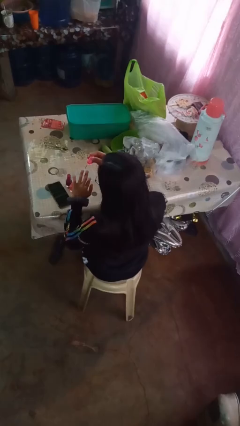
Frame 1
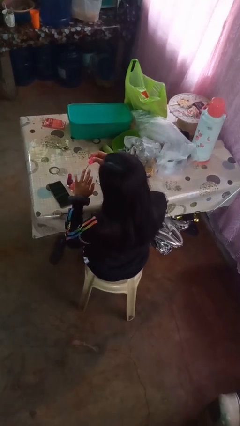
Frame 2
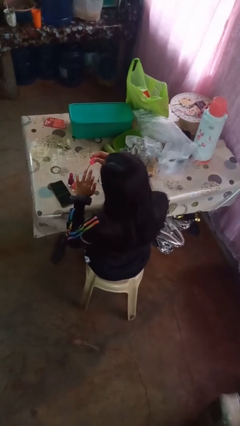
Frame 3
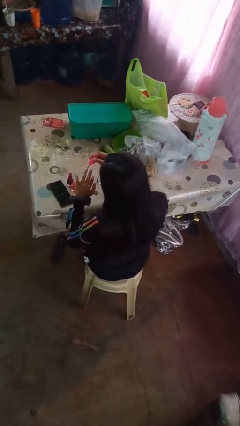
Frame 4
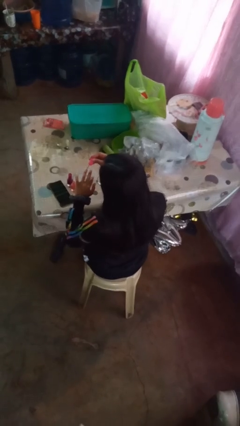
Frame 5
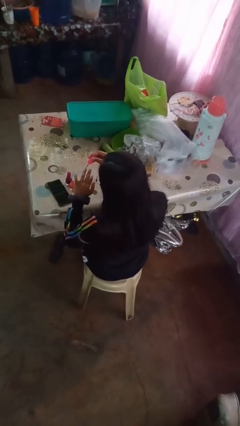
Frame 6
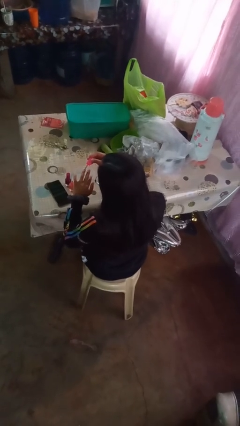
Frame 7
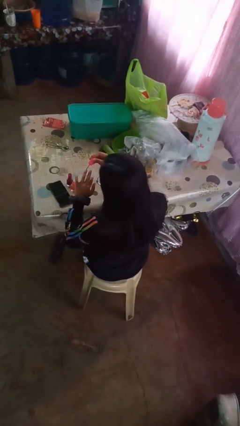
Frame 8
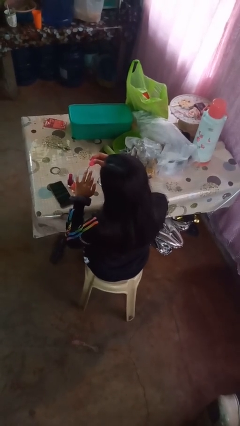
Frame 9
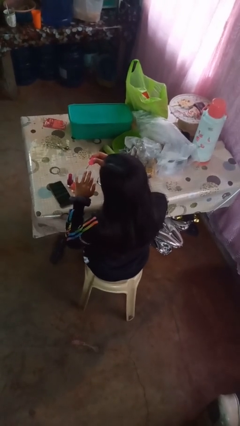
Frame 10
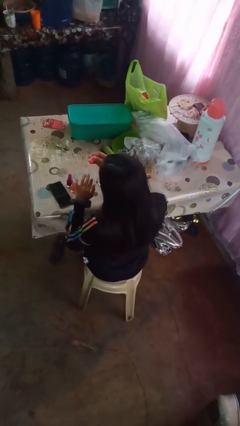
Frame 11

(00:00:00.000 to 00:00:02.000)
person paints fingernails

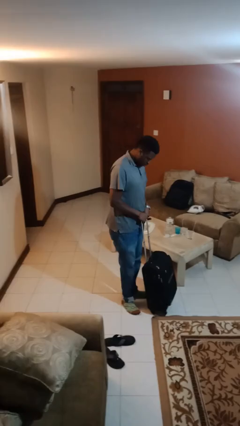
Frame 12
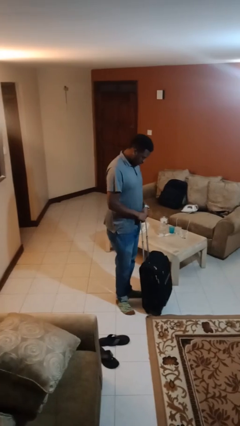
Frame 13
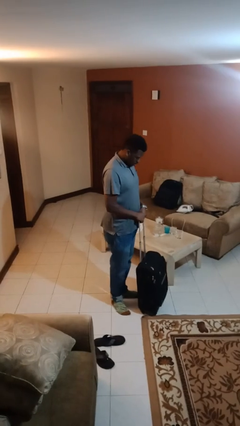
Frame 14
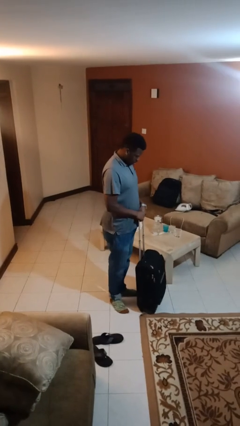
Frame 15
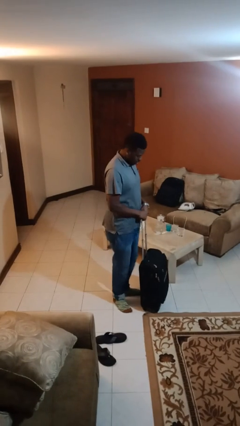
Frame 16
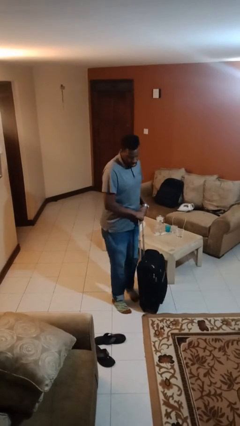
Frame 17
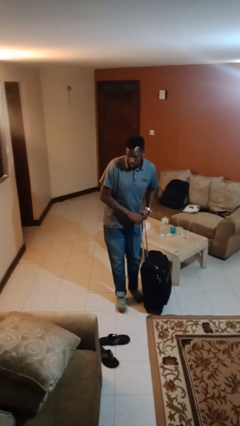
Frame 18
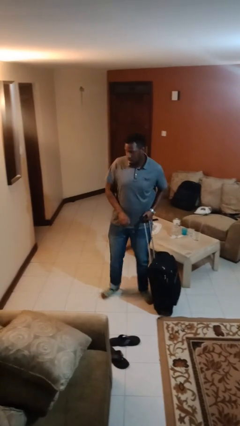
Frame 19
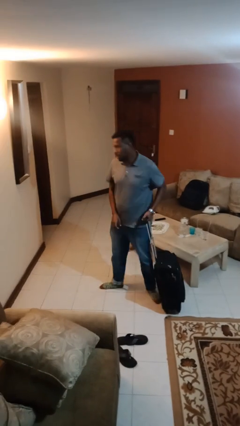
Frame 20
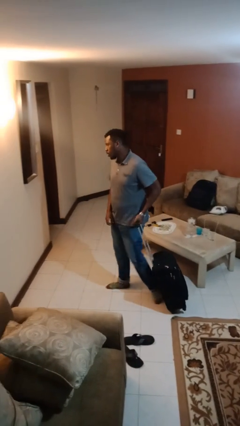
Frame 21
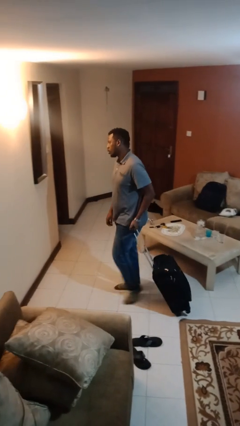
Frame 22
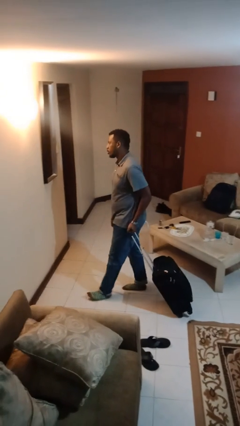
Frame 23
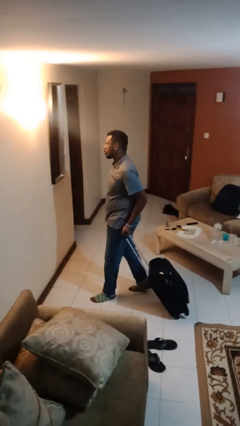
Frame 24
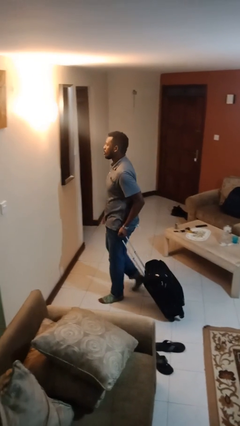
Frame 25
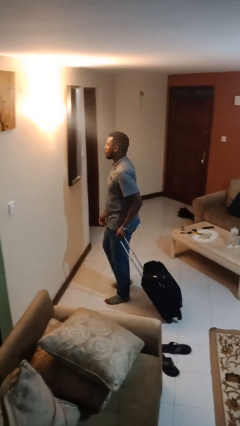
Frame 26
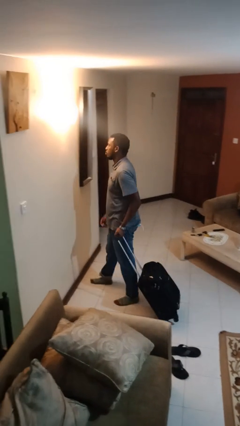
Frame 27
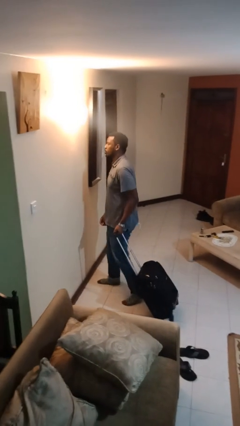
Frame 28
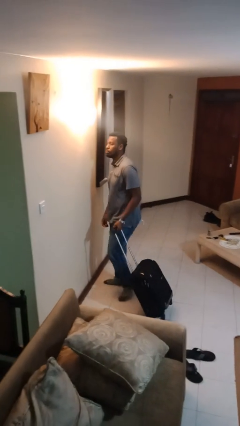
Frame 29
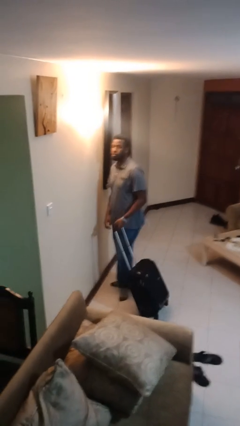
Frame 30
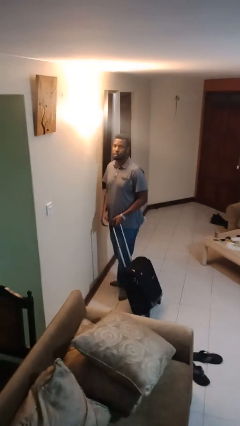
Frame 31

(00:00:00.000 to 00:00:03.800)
person pulls wheeled cart

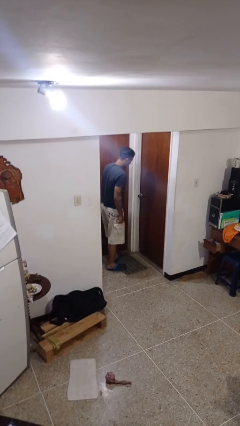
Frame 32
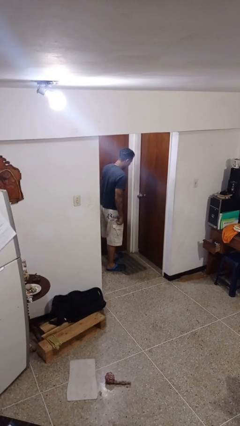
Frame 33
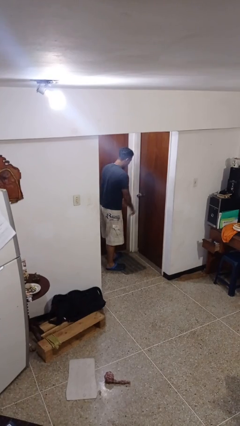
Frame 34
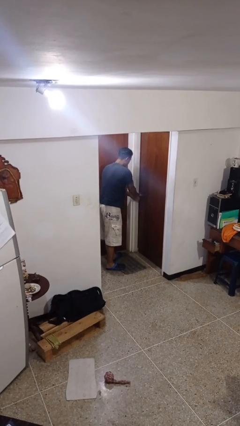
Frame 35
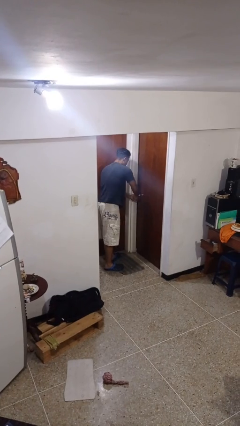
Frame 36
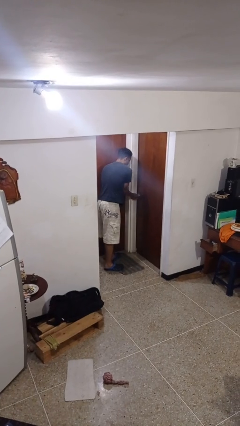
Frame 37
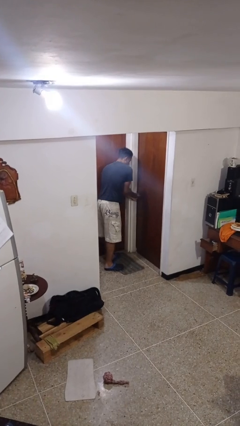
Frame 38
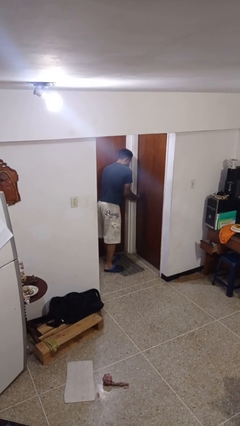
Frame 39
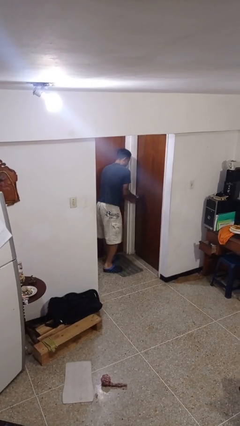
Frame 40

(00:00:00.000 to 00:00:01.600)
person unlocks door with keys

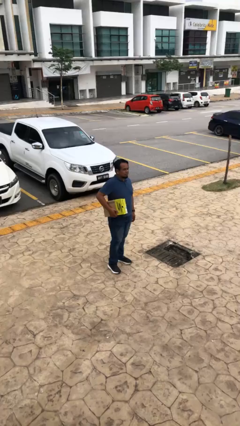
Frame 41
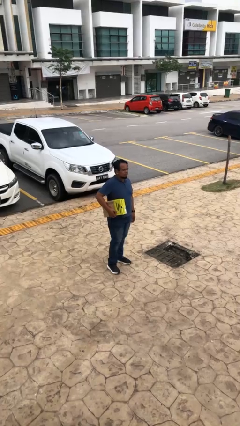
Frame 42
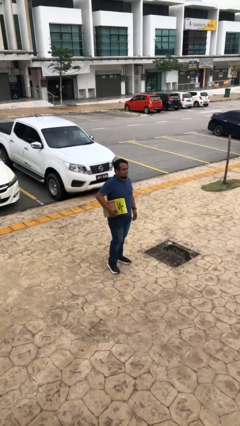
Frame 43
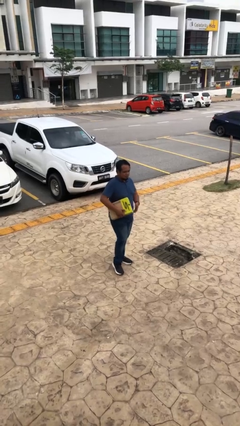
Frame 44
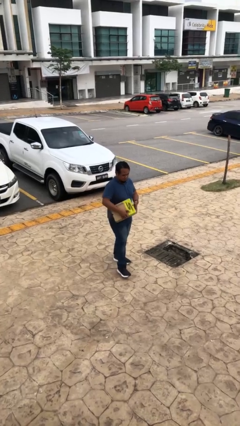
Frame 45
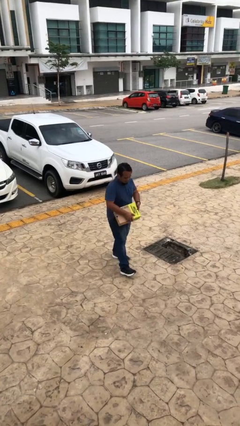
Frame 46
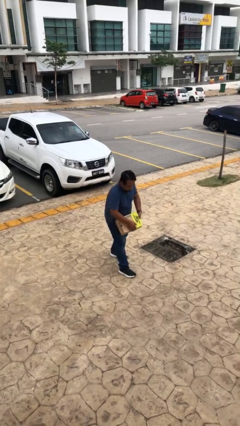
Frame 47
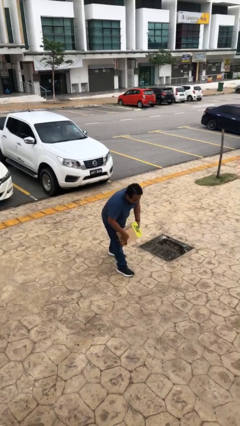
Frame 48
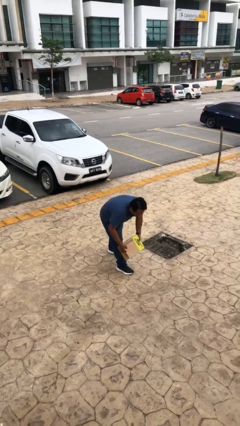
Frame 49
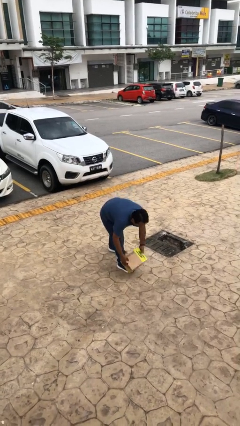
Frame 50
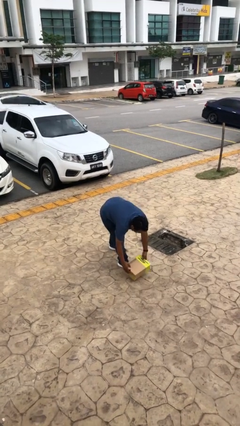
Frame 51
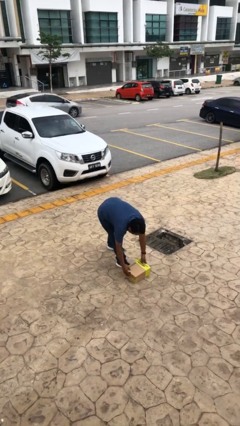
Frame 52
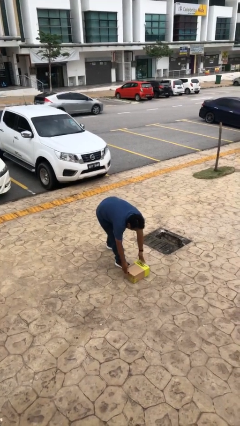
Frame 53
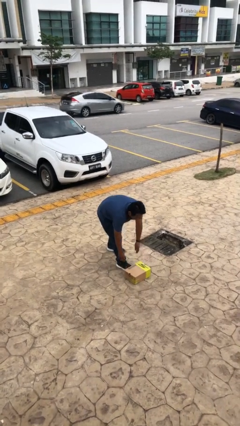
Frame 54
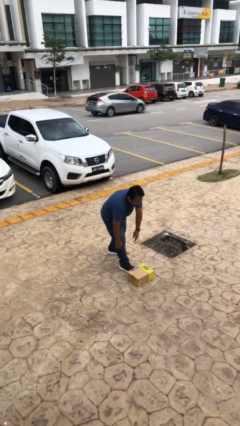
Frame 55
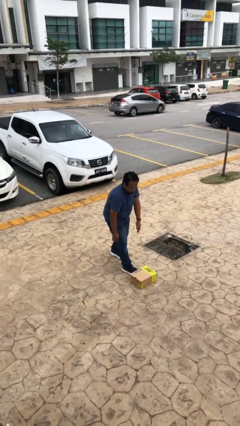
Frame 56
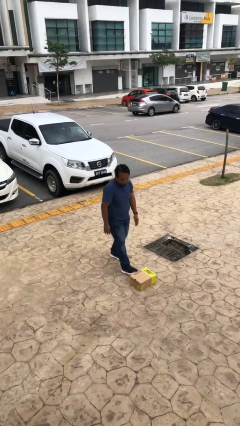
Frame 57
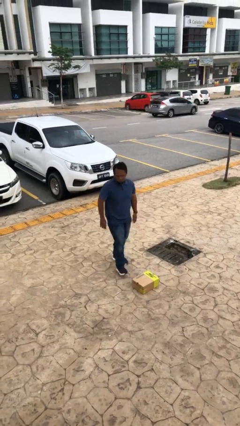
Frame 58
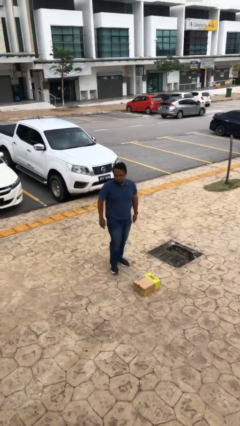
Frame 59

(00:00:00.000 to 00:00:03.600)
person puts down object on floor

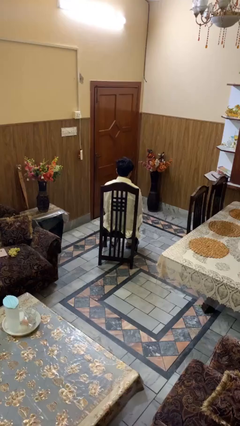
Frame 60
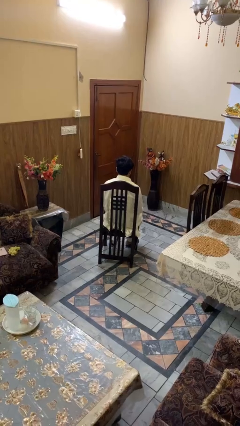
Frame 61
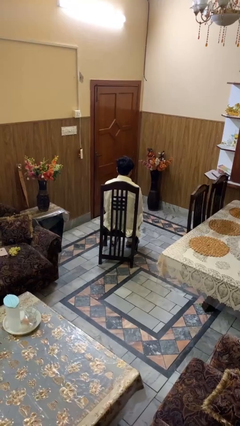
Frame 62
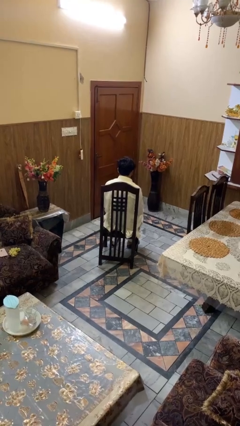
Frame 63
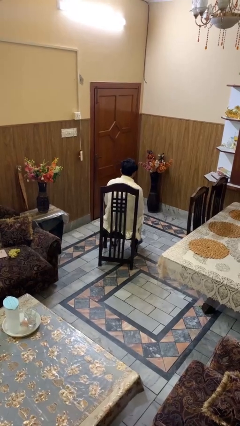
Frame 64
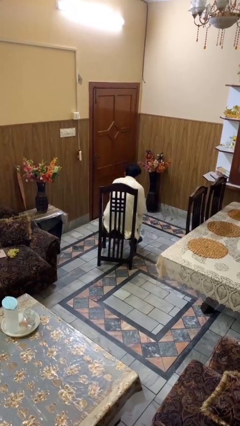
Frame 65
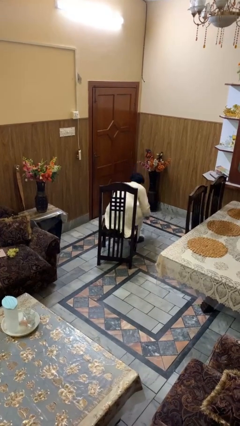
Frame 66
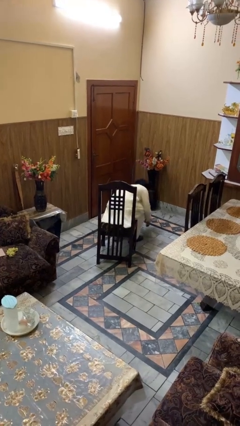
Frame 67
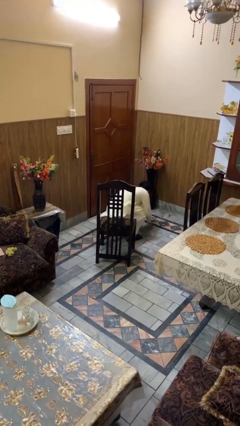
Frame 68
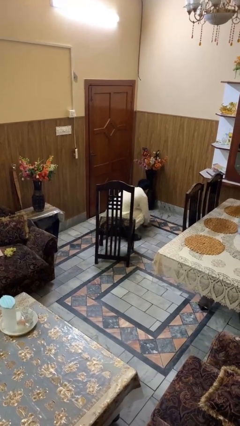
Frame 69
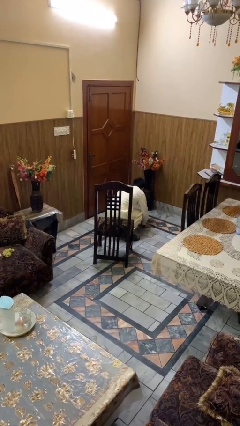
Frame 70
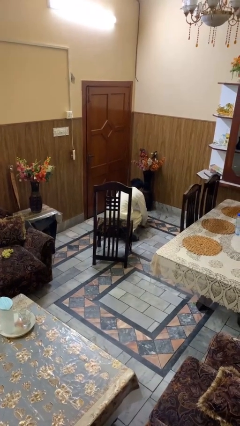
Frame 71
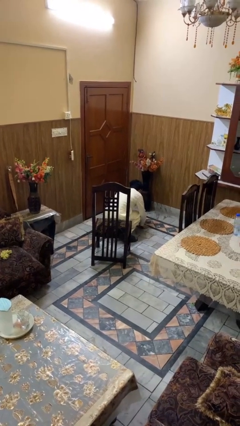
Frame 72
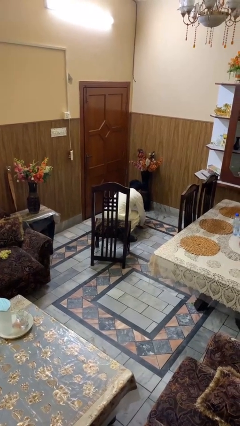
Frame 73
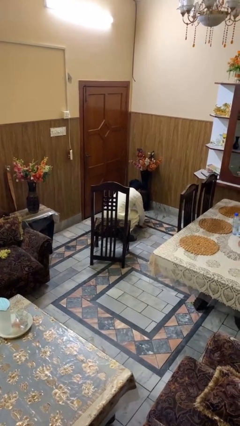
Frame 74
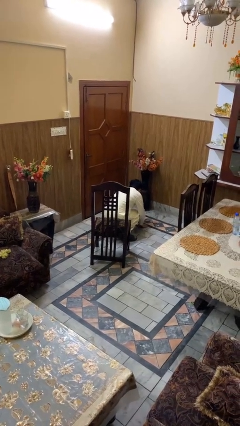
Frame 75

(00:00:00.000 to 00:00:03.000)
person falls from chair

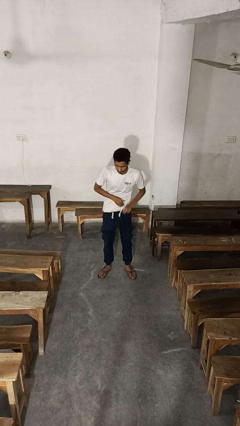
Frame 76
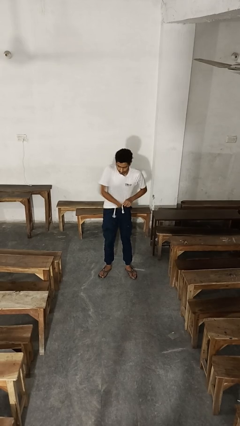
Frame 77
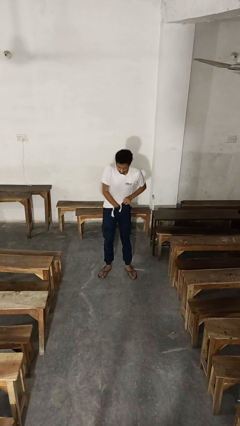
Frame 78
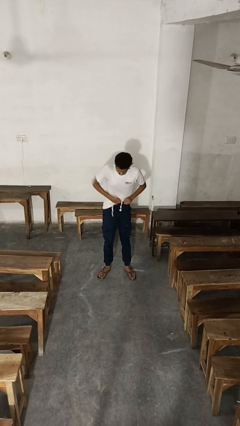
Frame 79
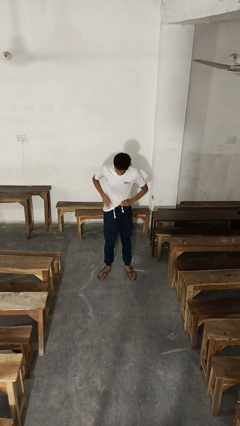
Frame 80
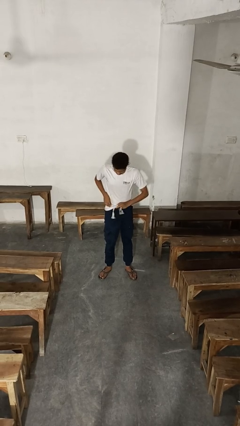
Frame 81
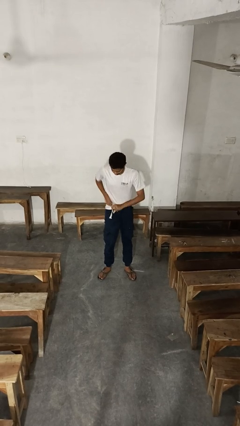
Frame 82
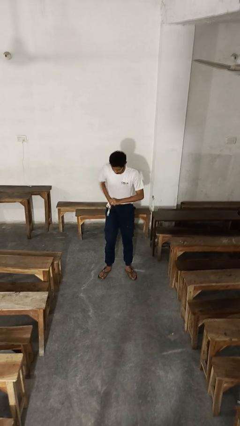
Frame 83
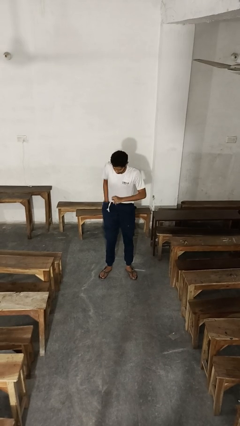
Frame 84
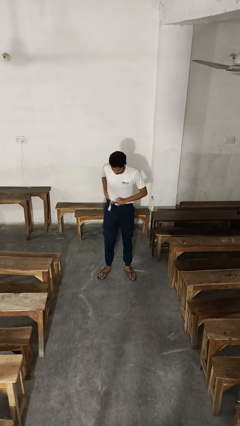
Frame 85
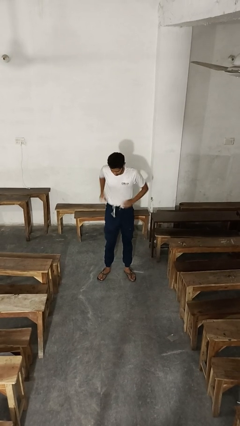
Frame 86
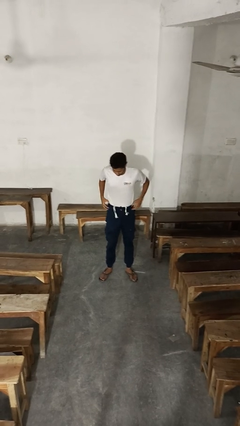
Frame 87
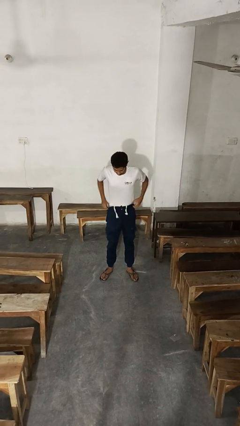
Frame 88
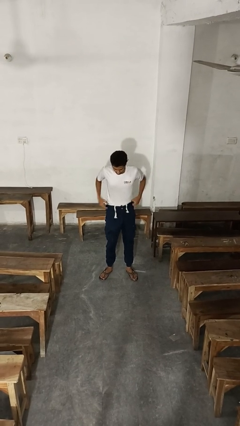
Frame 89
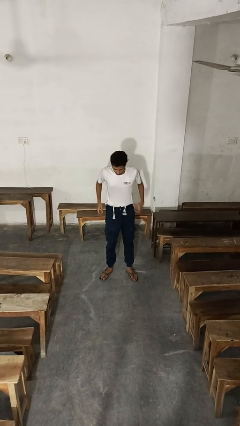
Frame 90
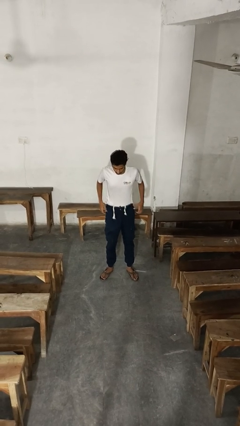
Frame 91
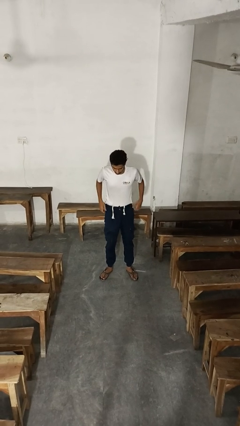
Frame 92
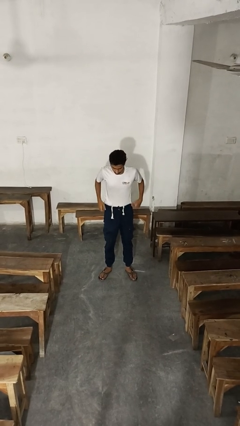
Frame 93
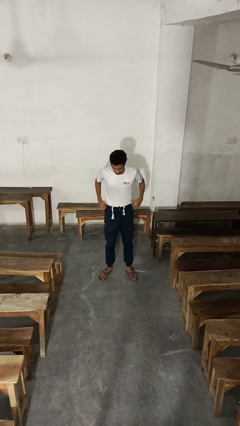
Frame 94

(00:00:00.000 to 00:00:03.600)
person tucks in shirt
